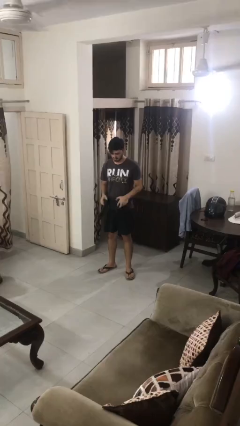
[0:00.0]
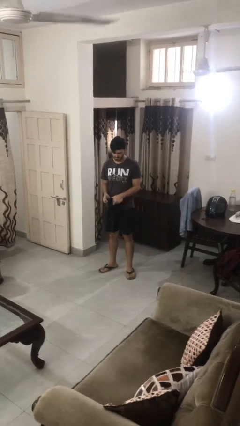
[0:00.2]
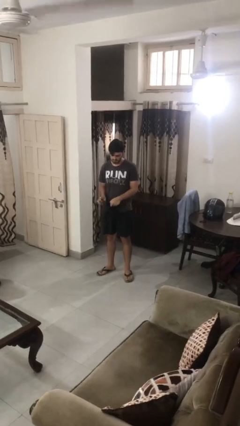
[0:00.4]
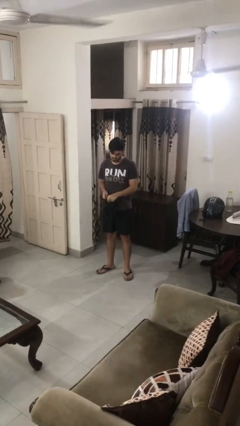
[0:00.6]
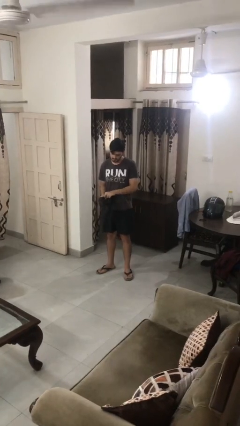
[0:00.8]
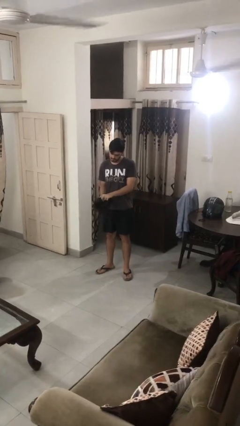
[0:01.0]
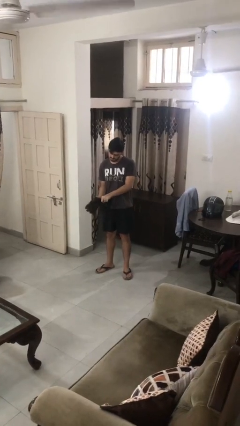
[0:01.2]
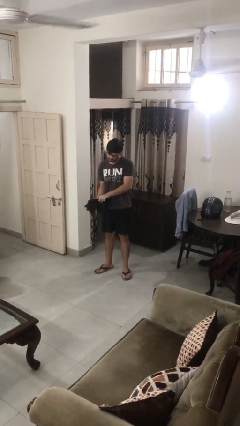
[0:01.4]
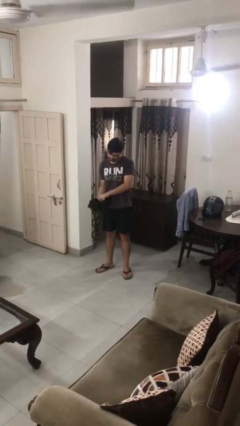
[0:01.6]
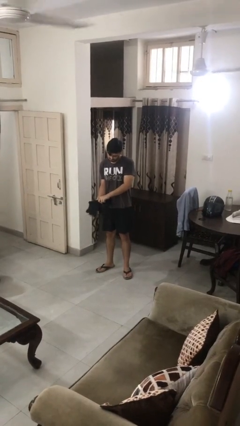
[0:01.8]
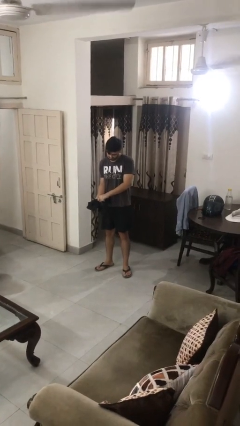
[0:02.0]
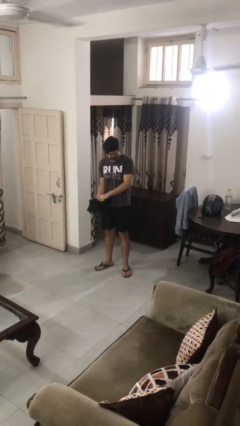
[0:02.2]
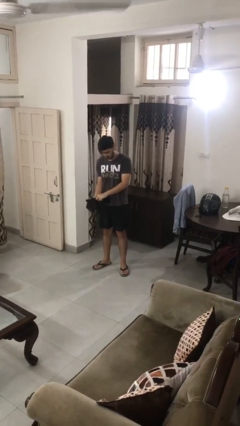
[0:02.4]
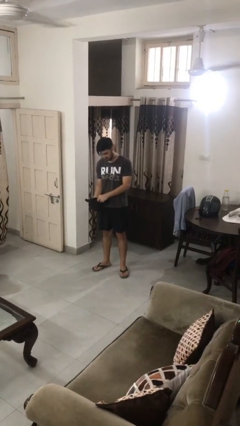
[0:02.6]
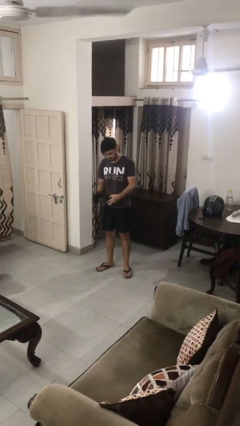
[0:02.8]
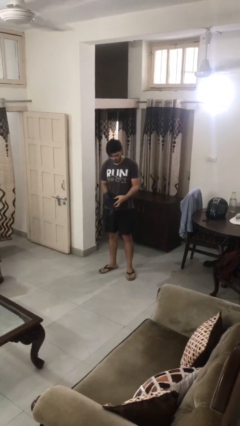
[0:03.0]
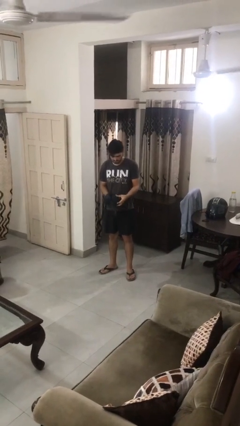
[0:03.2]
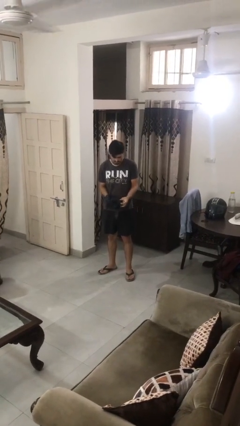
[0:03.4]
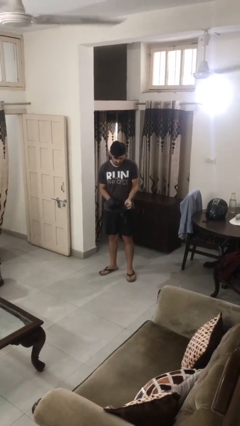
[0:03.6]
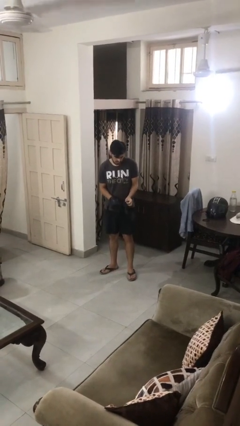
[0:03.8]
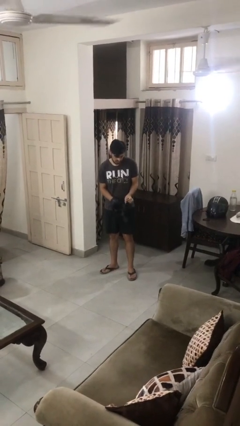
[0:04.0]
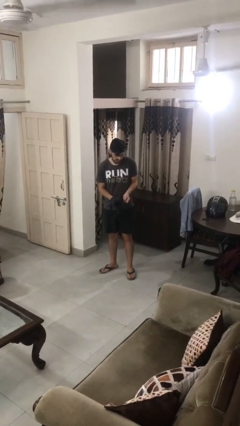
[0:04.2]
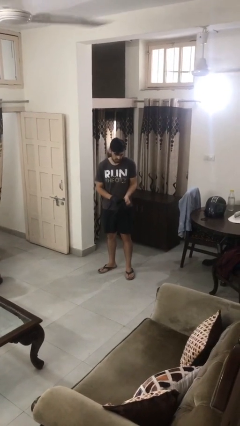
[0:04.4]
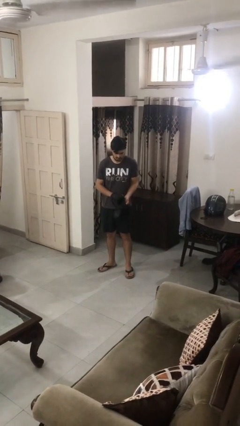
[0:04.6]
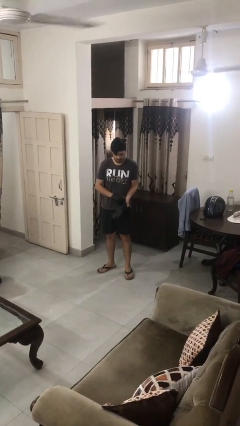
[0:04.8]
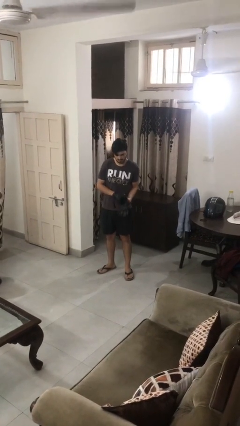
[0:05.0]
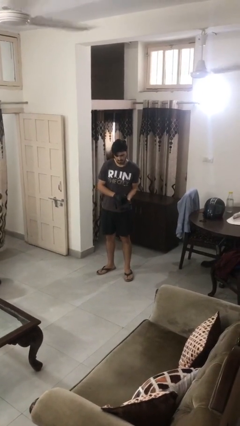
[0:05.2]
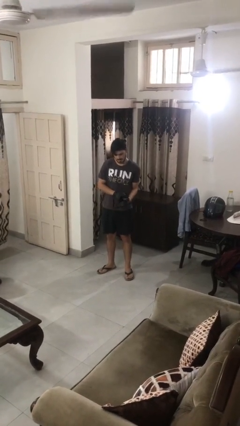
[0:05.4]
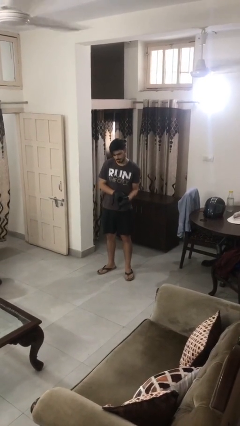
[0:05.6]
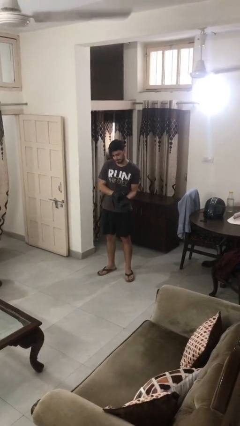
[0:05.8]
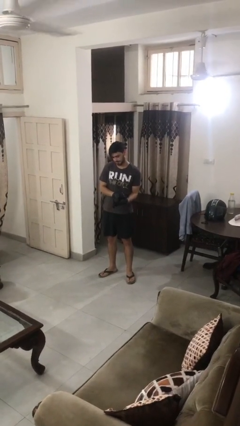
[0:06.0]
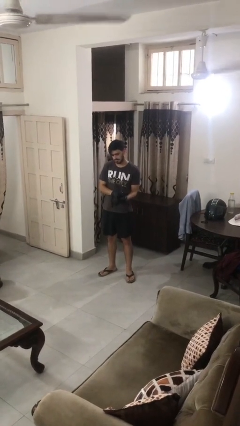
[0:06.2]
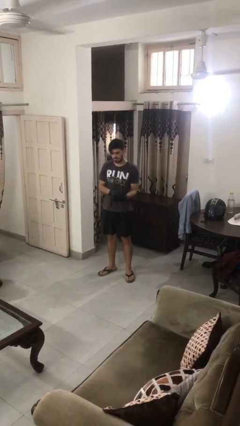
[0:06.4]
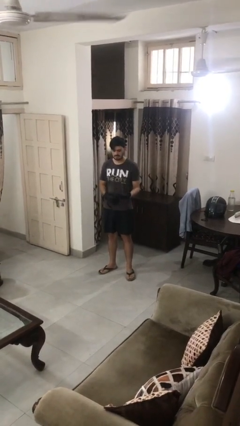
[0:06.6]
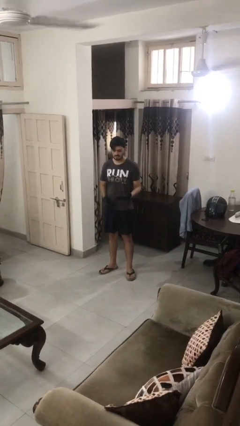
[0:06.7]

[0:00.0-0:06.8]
person puts on gloves

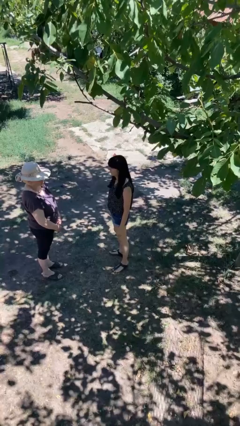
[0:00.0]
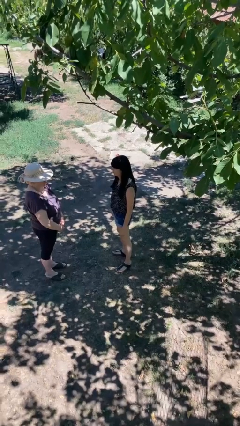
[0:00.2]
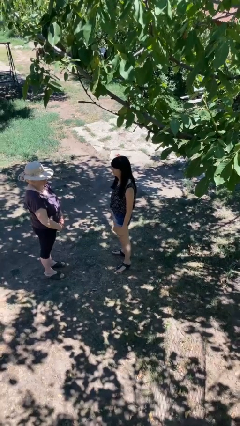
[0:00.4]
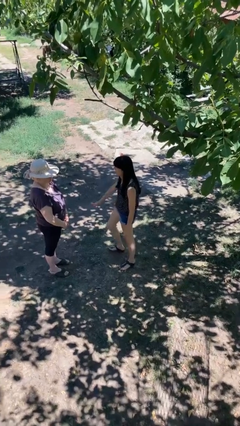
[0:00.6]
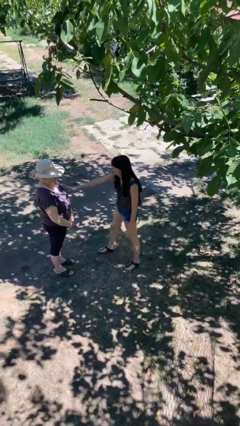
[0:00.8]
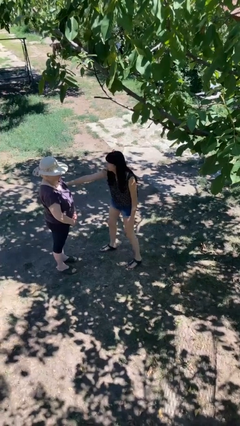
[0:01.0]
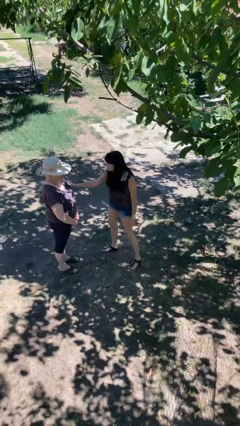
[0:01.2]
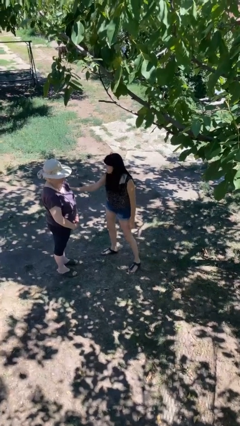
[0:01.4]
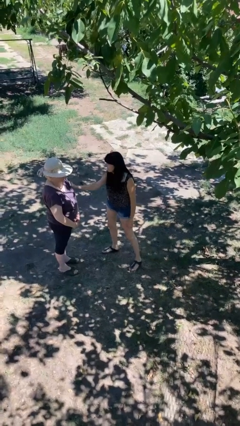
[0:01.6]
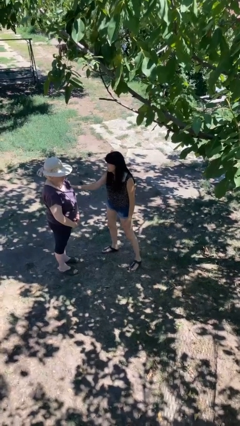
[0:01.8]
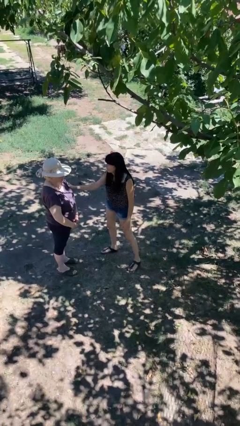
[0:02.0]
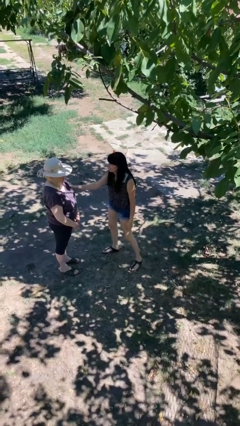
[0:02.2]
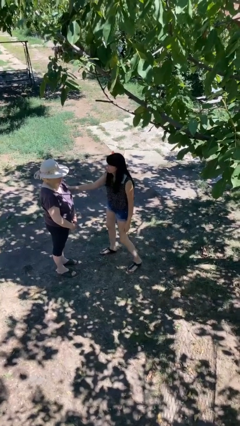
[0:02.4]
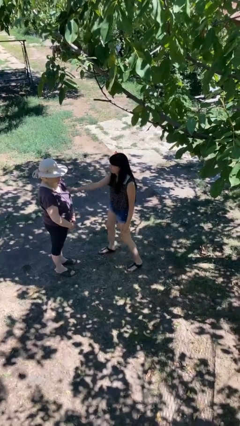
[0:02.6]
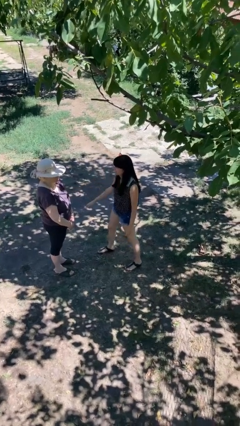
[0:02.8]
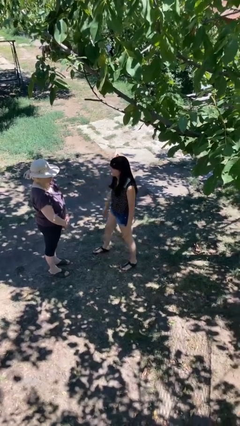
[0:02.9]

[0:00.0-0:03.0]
person grabs person by bicep

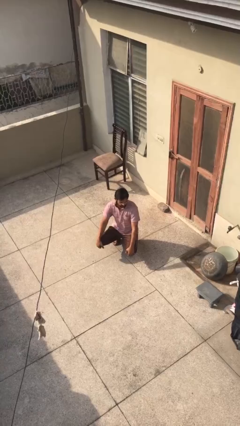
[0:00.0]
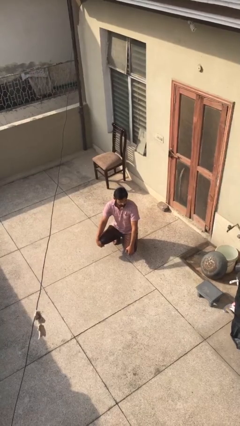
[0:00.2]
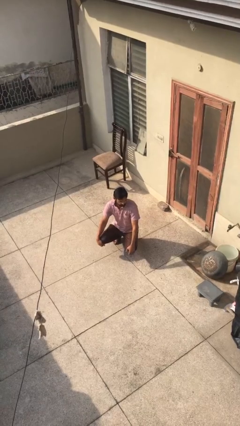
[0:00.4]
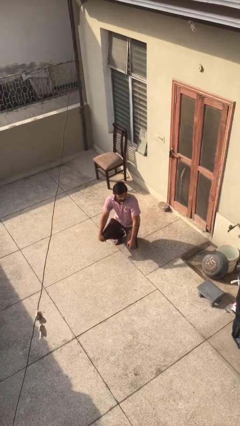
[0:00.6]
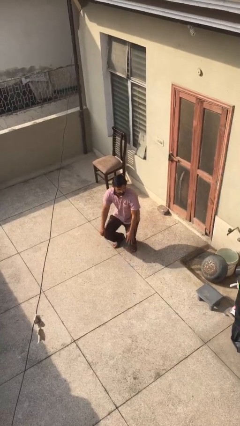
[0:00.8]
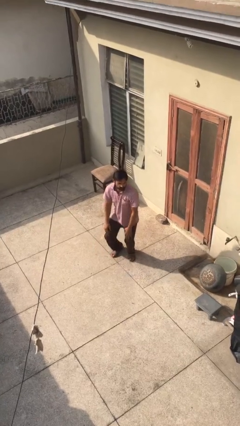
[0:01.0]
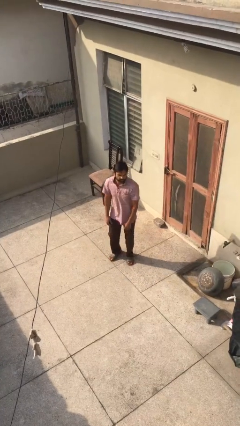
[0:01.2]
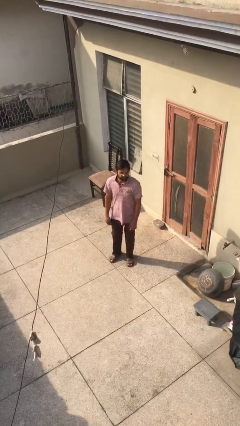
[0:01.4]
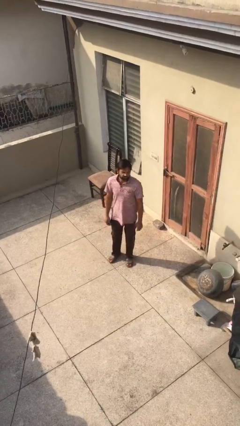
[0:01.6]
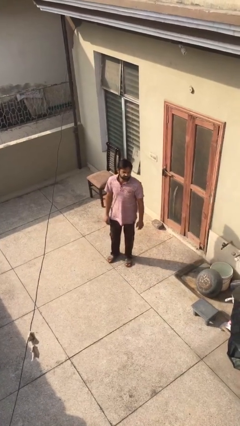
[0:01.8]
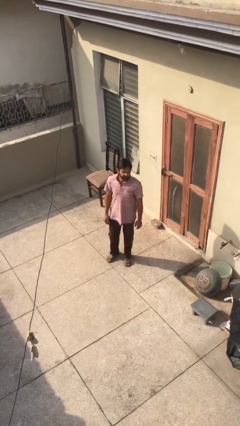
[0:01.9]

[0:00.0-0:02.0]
person stands up

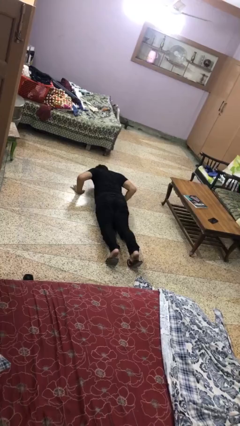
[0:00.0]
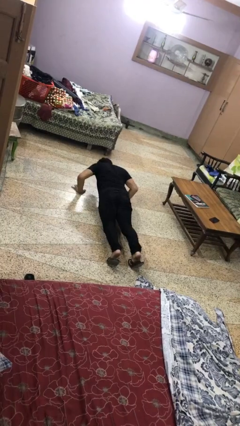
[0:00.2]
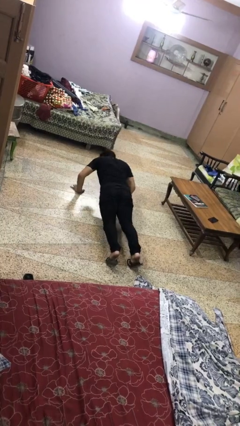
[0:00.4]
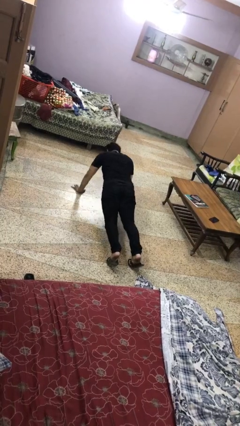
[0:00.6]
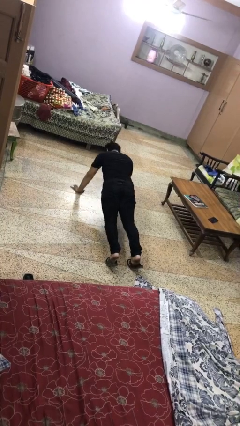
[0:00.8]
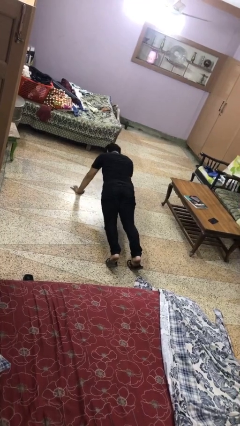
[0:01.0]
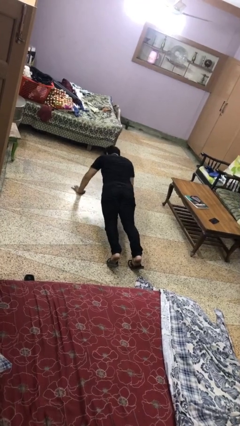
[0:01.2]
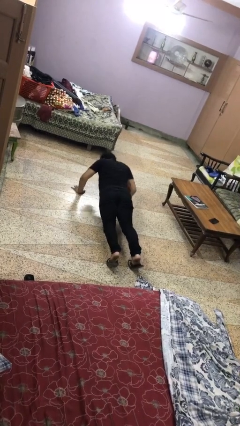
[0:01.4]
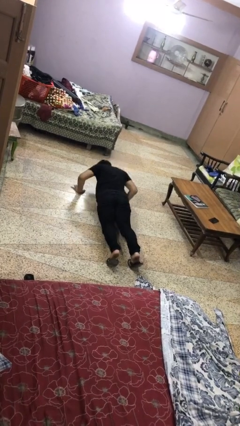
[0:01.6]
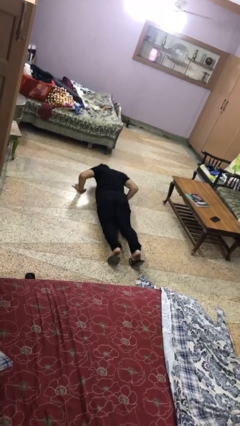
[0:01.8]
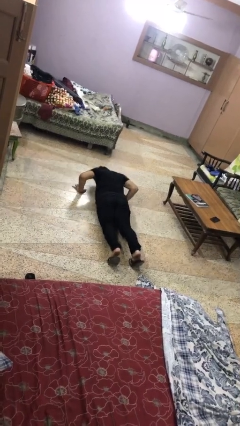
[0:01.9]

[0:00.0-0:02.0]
person exercises with pushup

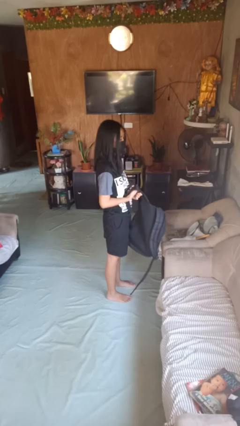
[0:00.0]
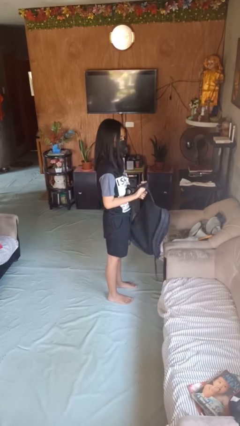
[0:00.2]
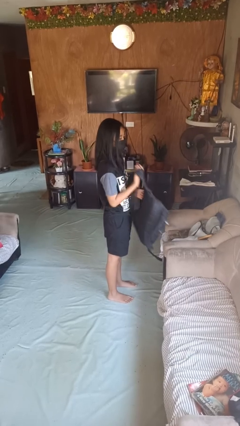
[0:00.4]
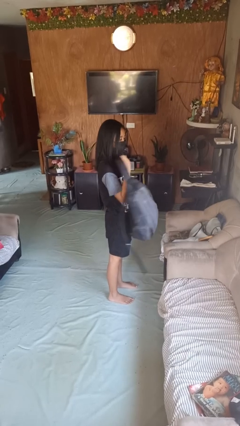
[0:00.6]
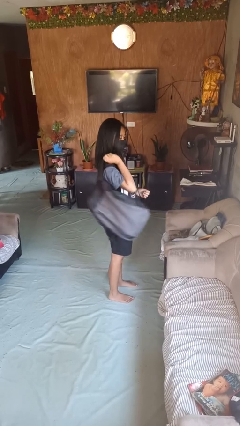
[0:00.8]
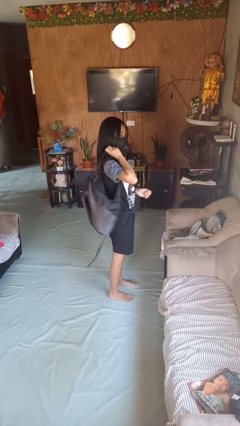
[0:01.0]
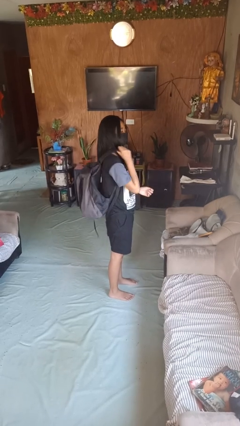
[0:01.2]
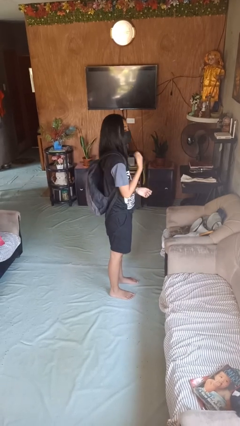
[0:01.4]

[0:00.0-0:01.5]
person puts on backpack

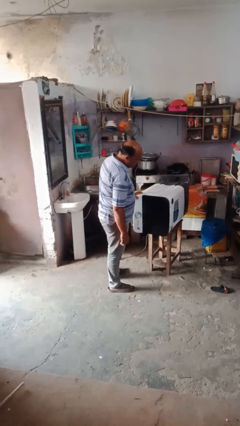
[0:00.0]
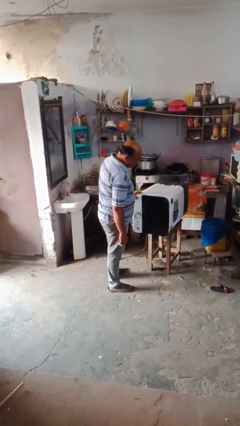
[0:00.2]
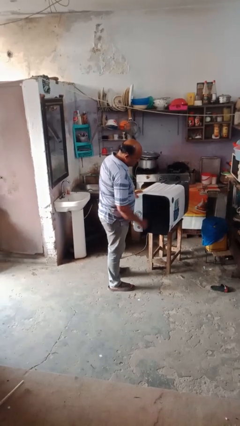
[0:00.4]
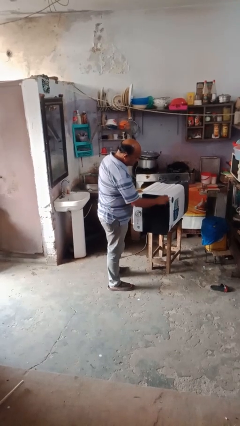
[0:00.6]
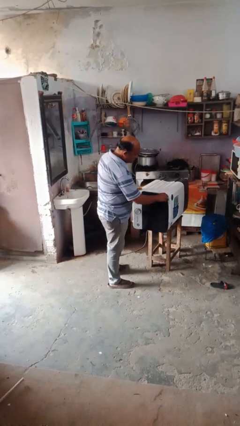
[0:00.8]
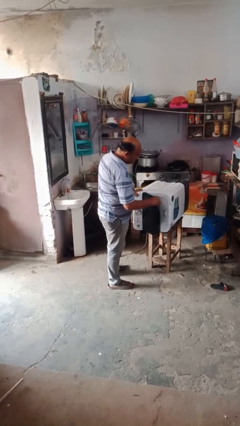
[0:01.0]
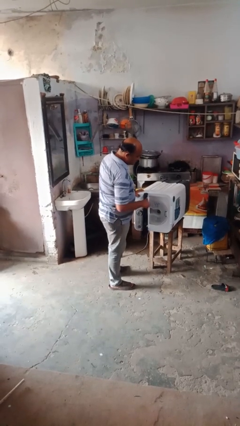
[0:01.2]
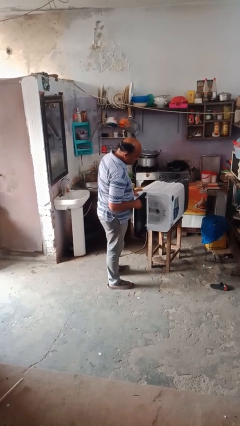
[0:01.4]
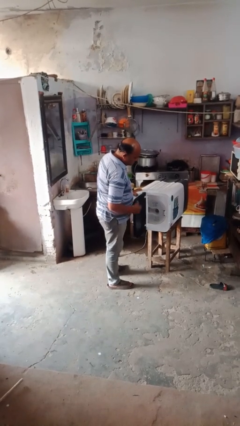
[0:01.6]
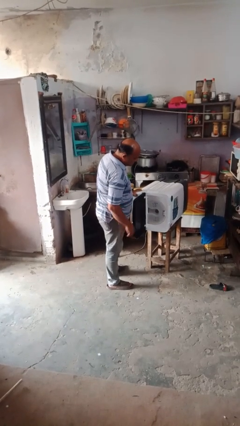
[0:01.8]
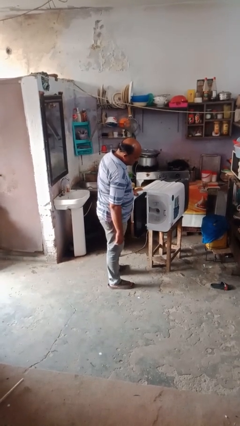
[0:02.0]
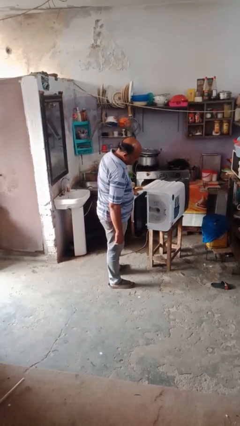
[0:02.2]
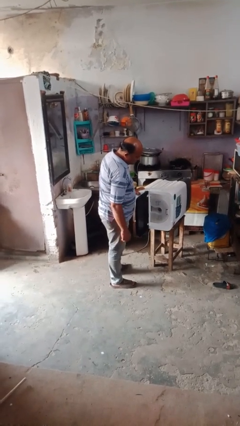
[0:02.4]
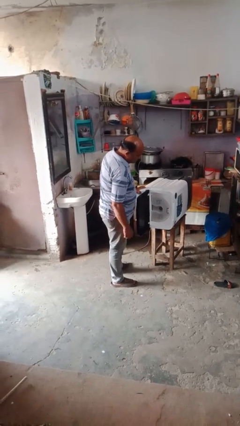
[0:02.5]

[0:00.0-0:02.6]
person opens dishwasher
